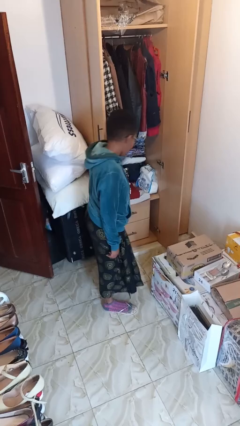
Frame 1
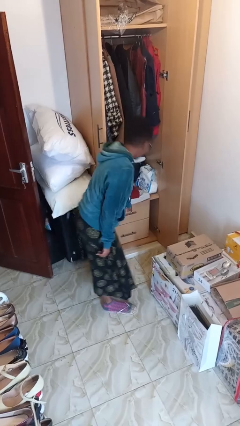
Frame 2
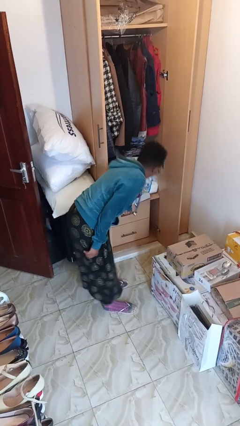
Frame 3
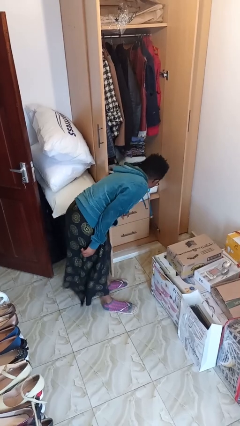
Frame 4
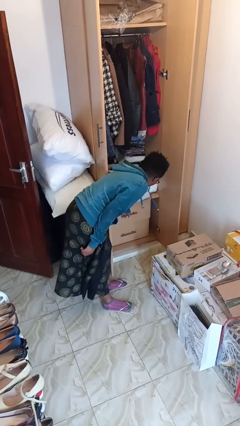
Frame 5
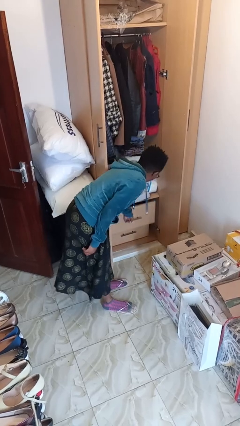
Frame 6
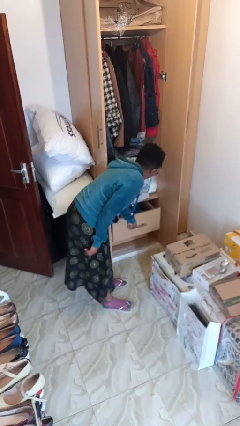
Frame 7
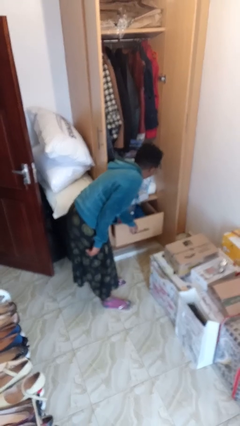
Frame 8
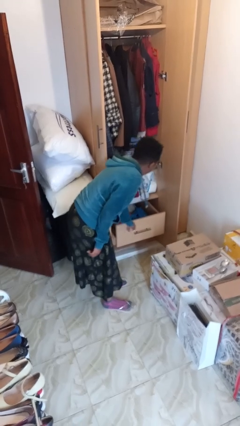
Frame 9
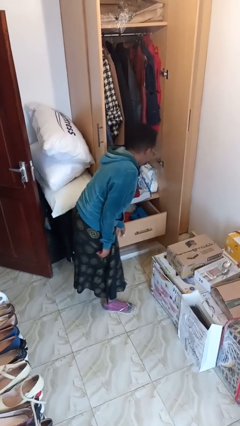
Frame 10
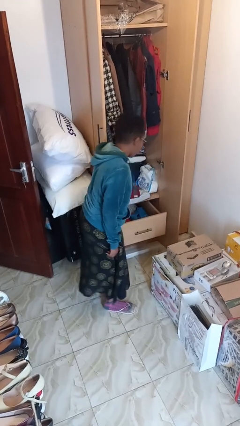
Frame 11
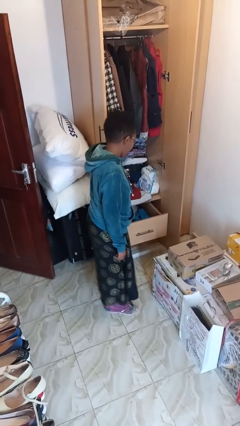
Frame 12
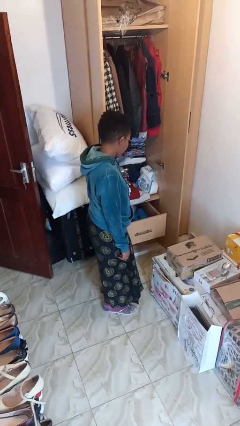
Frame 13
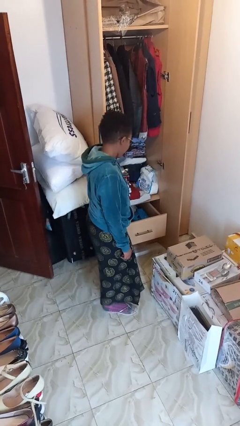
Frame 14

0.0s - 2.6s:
person opens dresser drawer

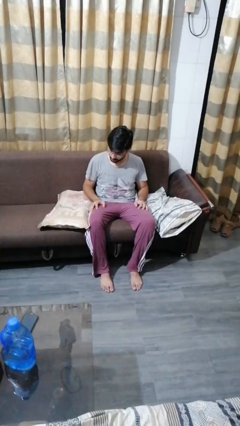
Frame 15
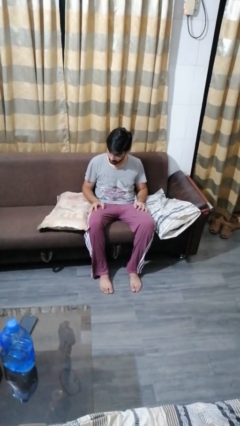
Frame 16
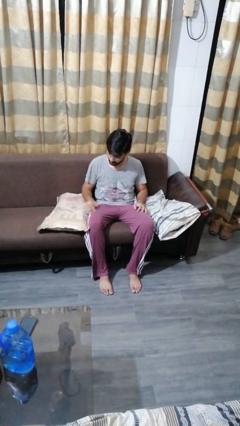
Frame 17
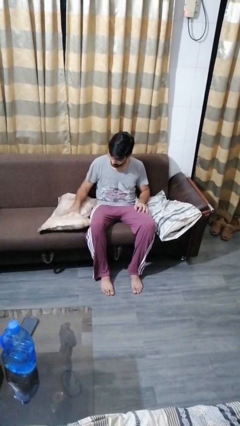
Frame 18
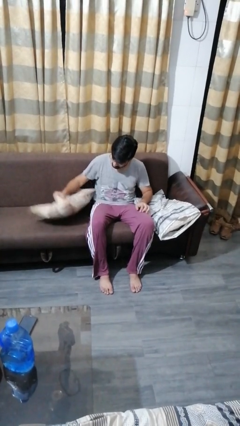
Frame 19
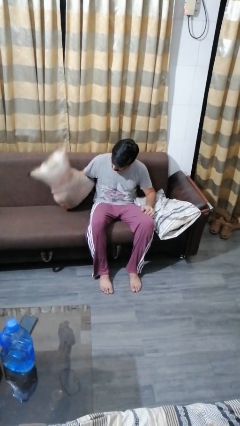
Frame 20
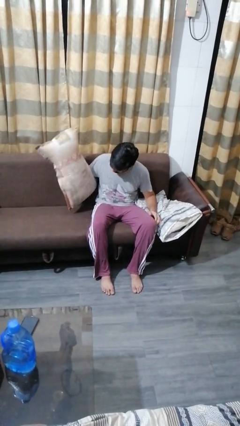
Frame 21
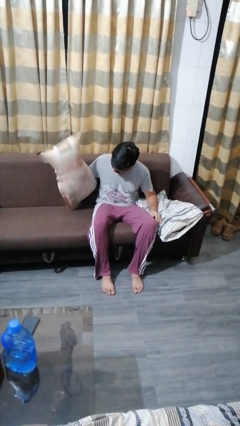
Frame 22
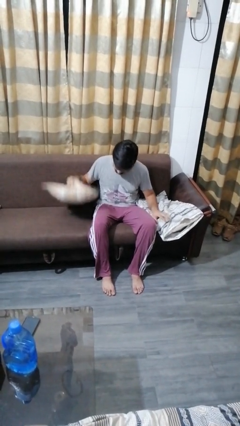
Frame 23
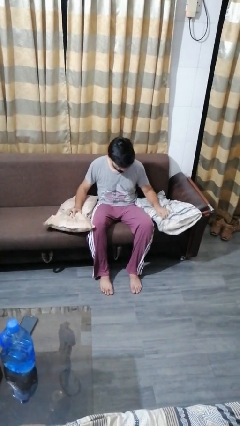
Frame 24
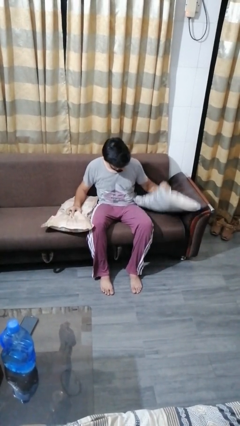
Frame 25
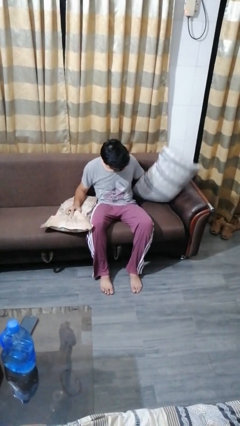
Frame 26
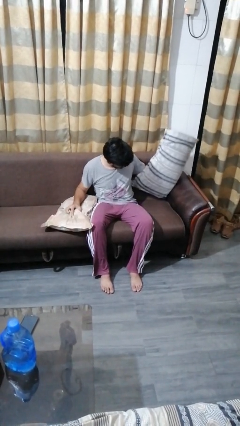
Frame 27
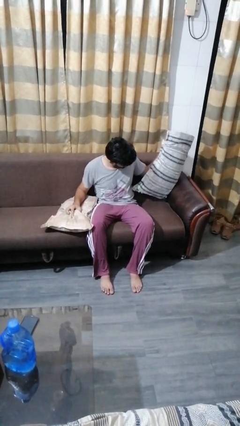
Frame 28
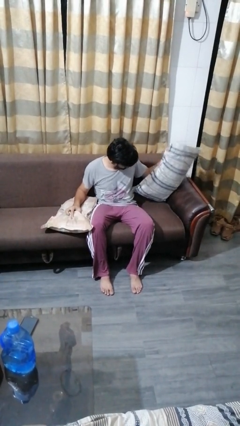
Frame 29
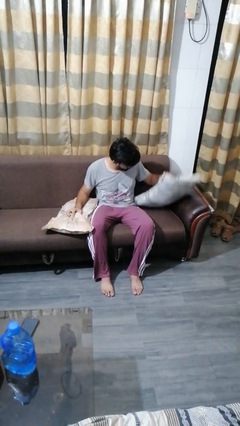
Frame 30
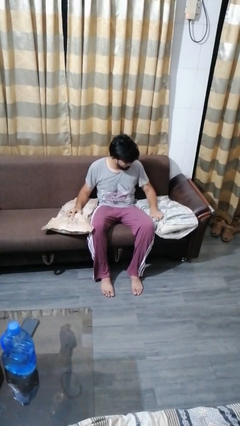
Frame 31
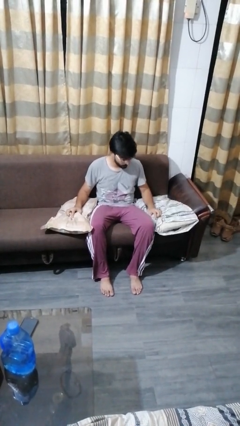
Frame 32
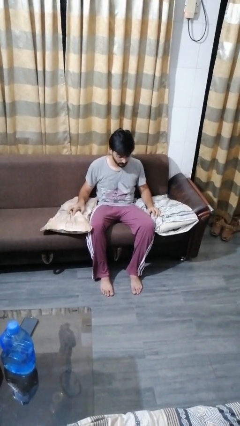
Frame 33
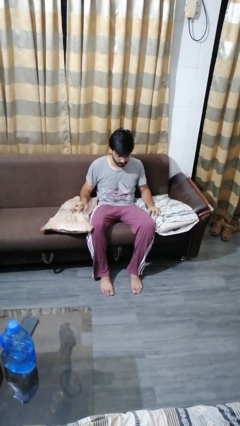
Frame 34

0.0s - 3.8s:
person searches in couch

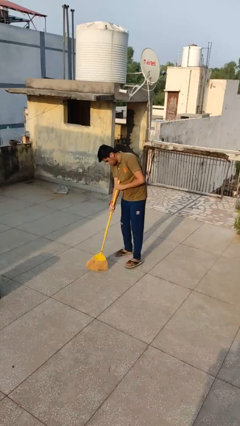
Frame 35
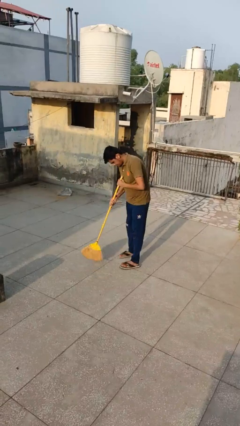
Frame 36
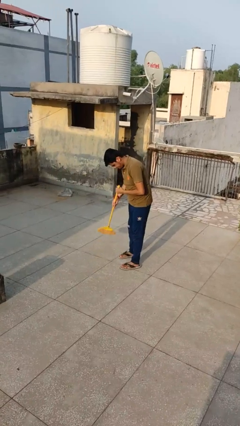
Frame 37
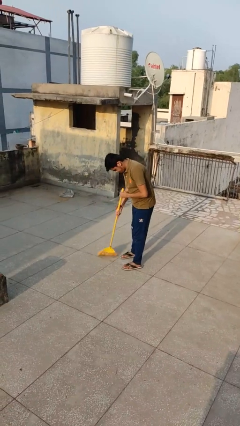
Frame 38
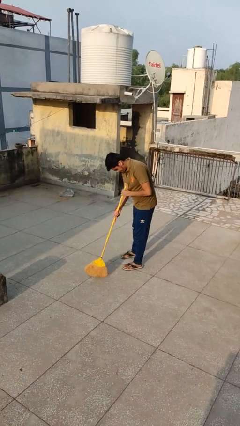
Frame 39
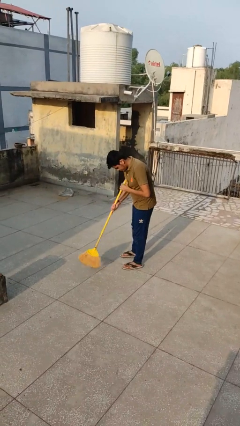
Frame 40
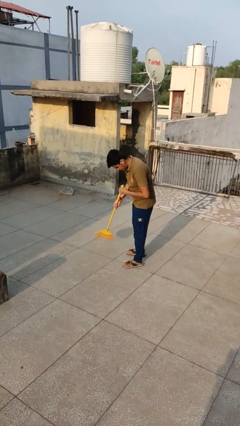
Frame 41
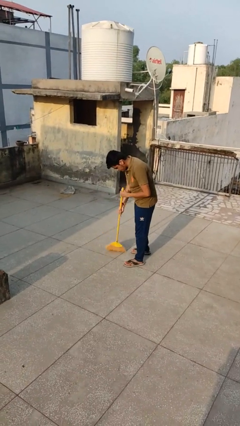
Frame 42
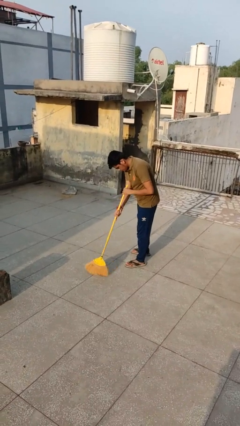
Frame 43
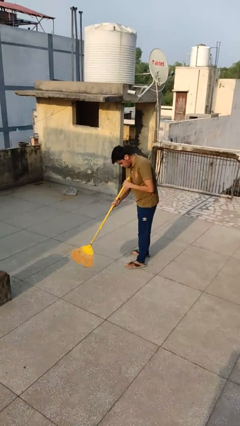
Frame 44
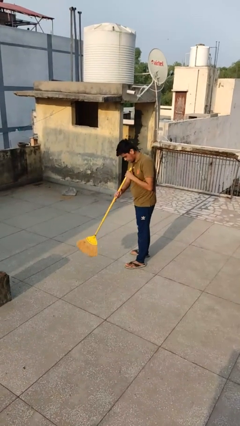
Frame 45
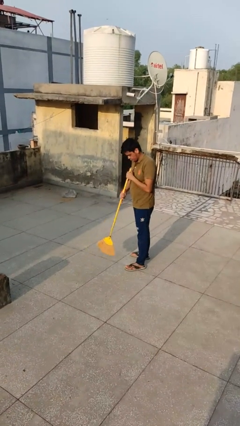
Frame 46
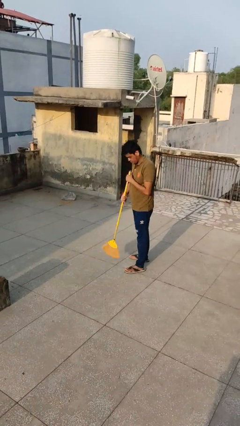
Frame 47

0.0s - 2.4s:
person sweeps floor

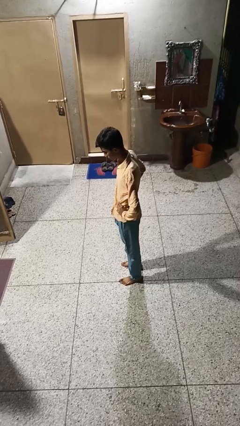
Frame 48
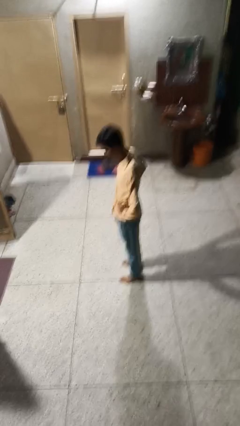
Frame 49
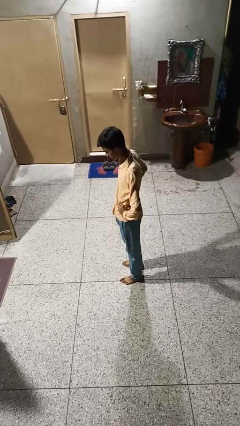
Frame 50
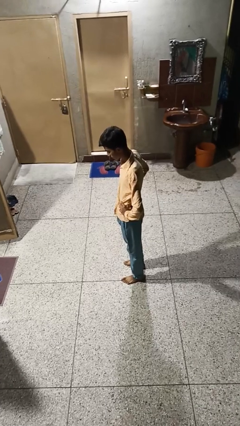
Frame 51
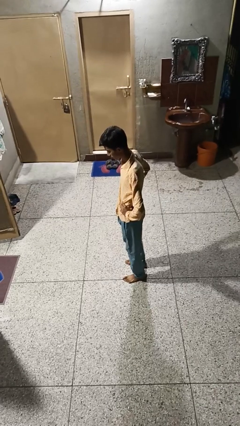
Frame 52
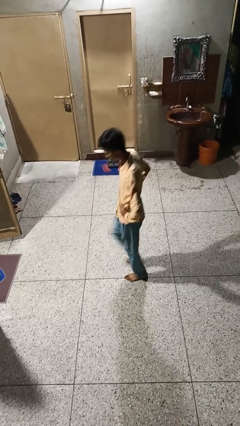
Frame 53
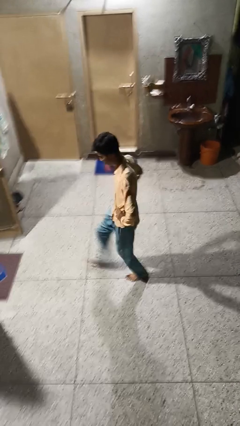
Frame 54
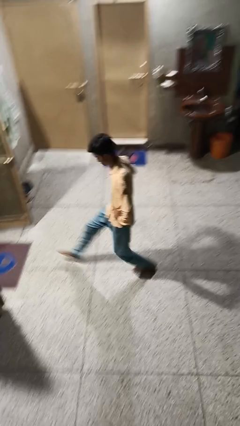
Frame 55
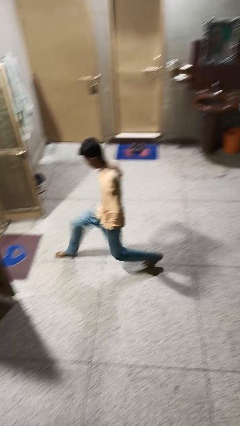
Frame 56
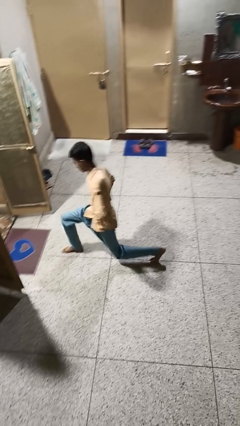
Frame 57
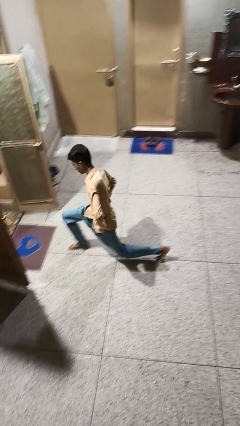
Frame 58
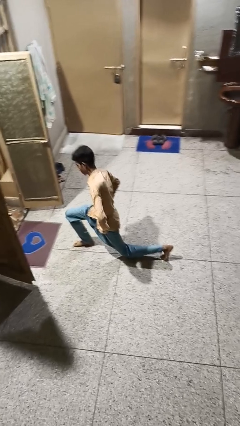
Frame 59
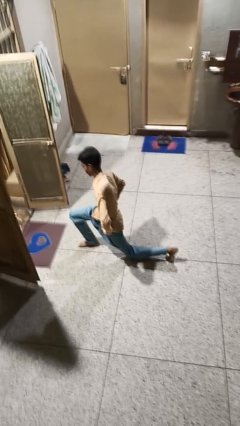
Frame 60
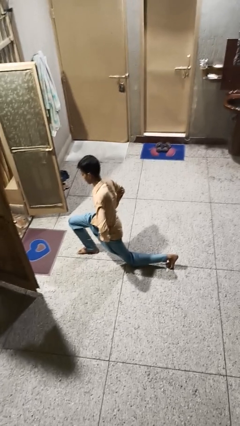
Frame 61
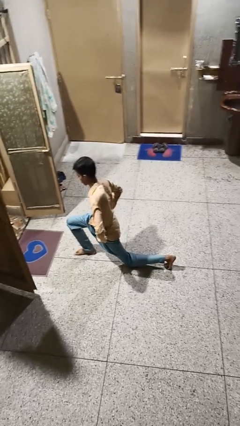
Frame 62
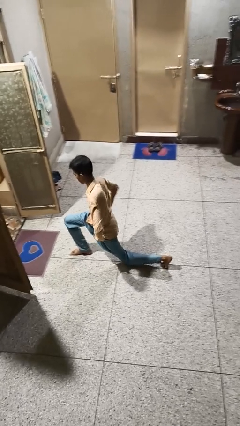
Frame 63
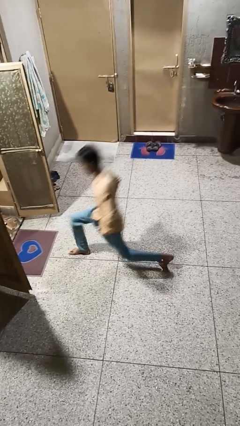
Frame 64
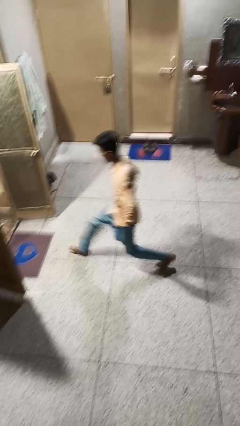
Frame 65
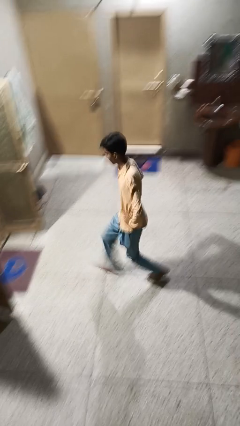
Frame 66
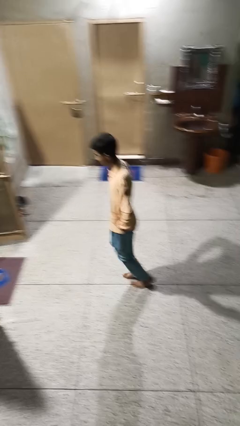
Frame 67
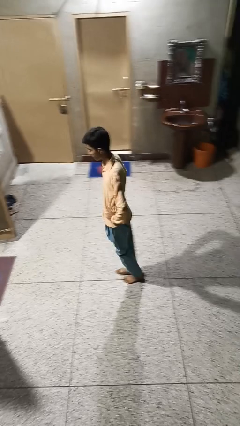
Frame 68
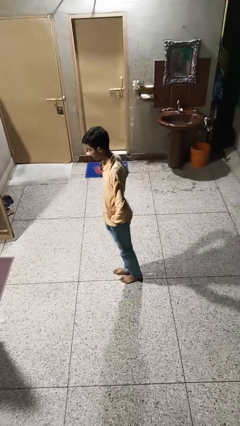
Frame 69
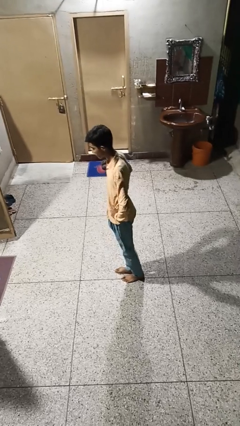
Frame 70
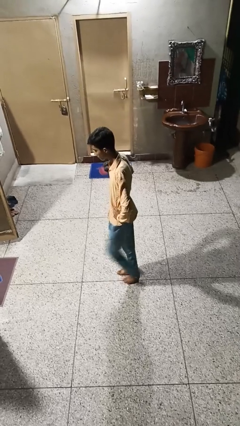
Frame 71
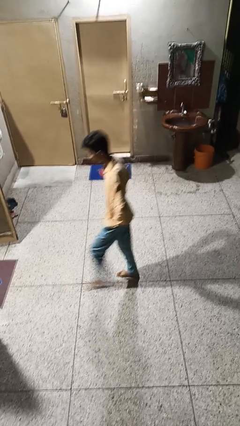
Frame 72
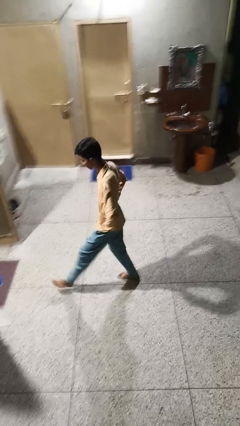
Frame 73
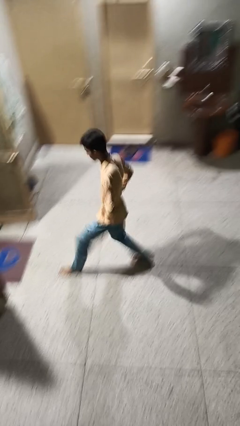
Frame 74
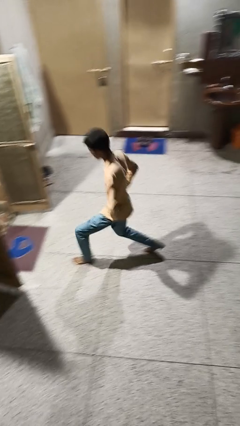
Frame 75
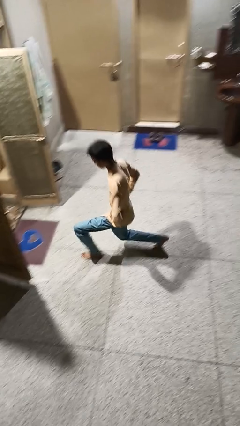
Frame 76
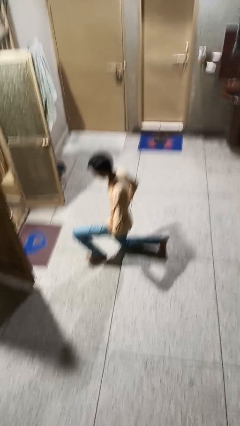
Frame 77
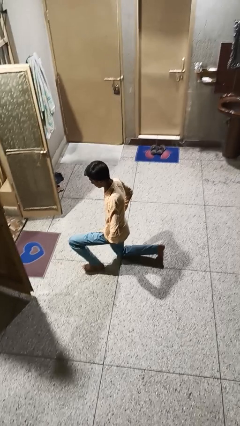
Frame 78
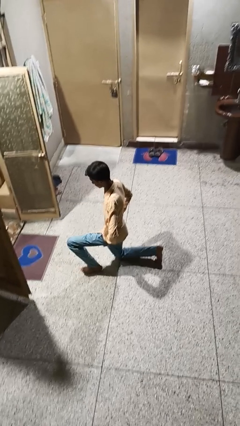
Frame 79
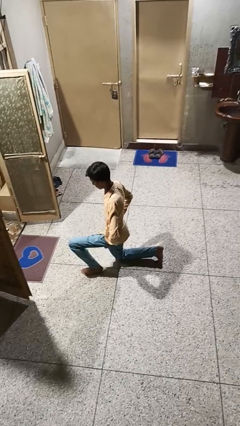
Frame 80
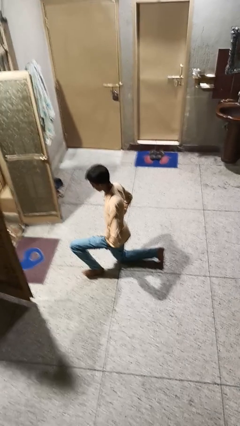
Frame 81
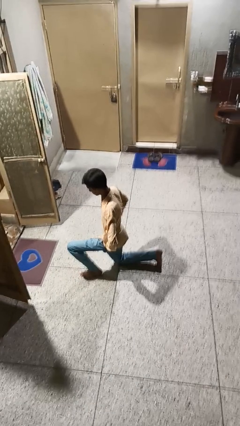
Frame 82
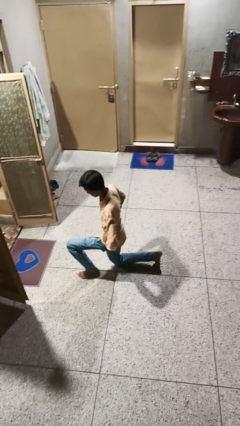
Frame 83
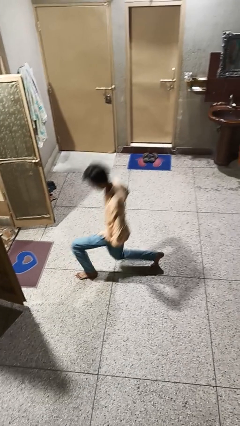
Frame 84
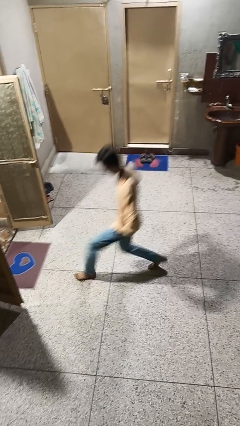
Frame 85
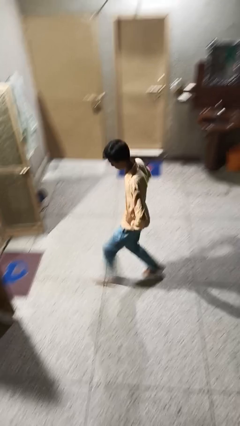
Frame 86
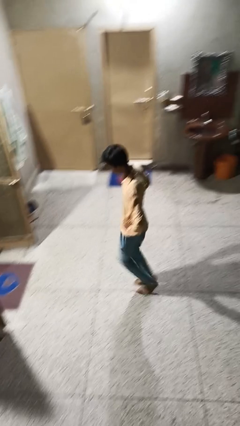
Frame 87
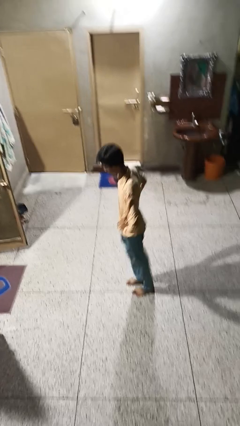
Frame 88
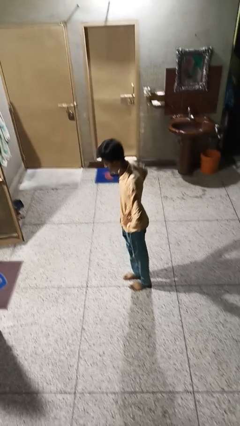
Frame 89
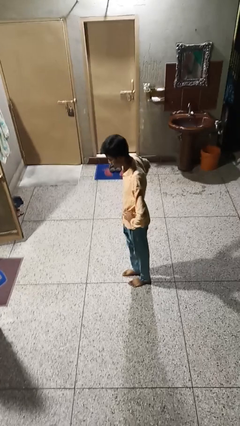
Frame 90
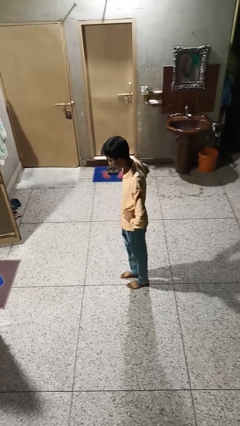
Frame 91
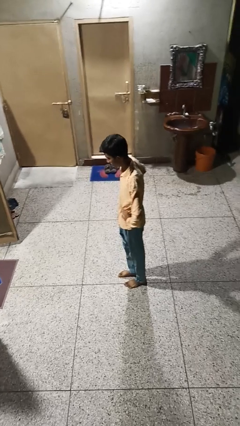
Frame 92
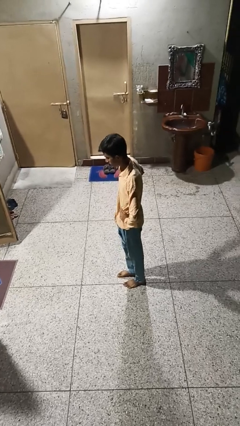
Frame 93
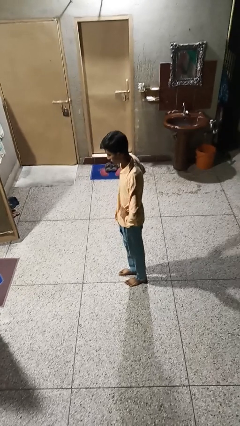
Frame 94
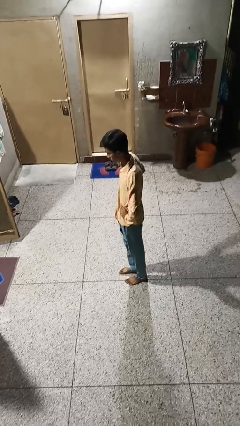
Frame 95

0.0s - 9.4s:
person exercises with lunges
